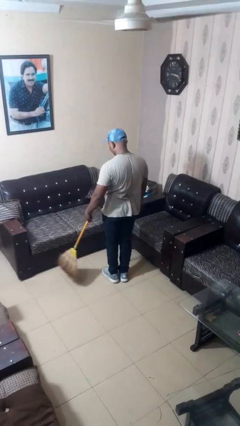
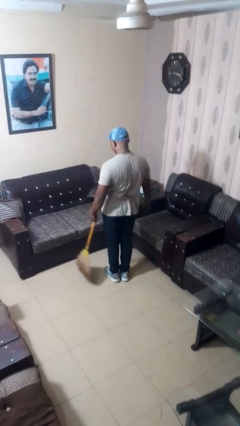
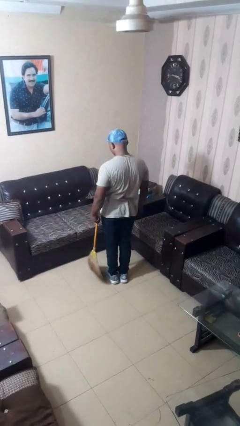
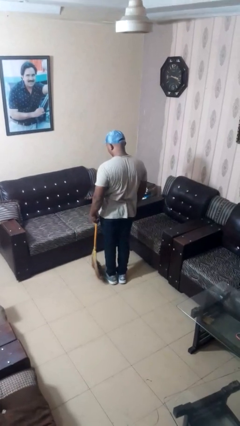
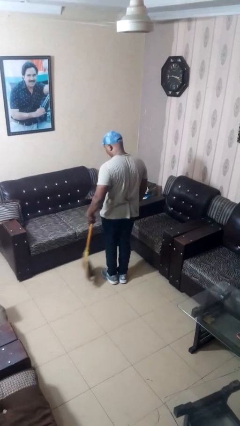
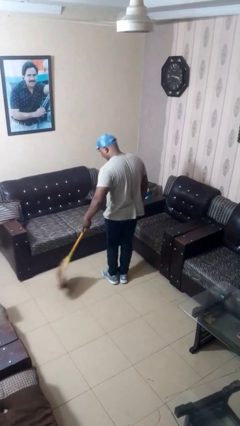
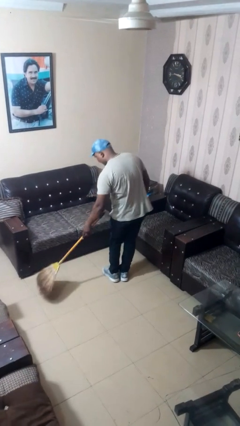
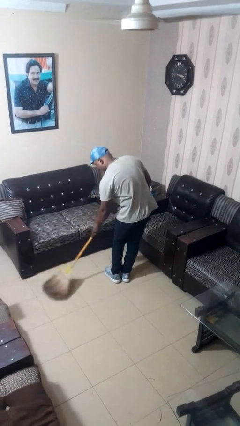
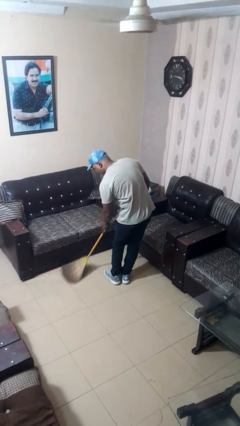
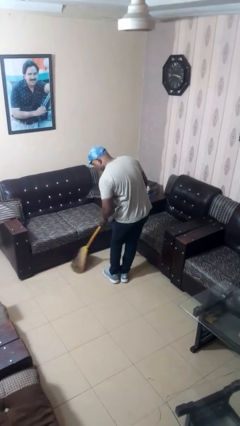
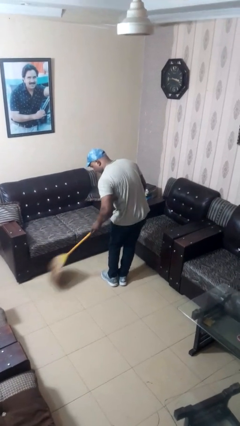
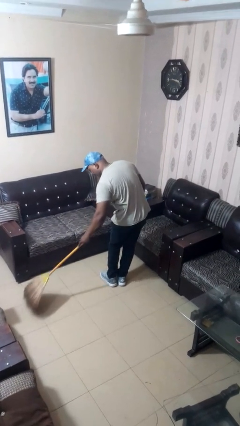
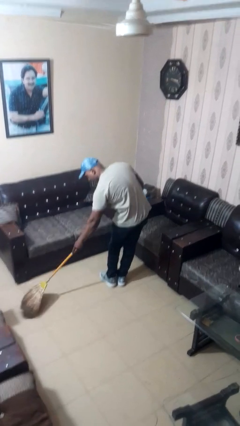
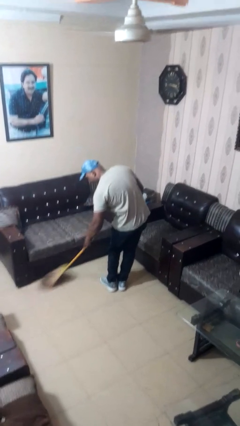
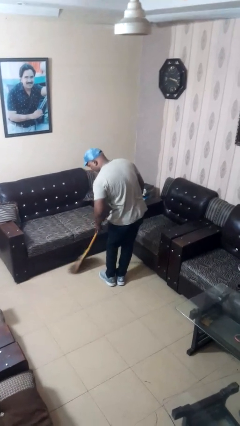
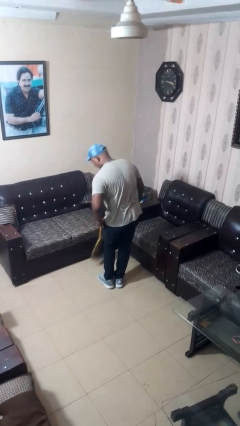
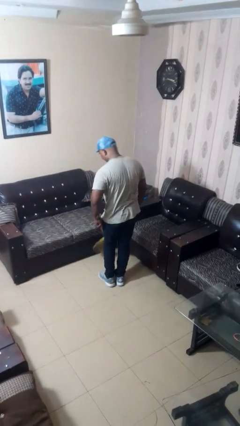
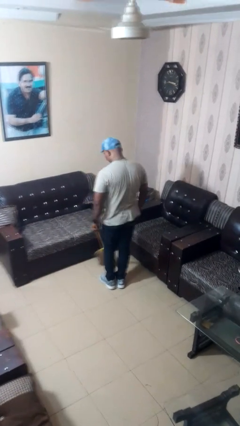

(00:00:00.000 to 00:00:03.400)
person sweeps floor

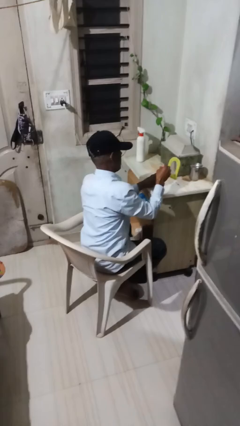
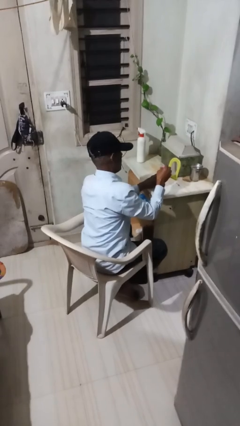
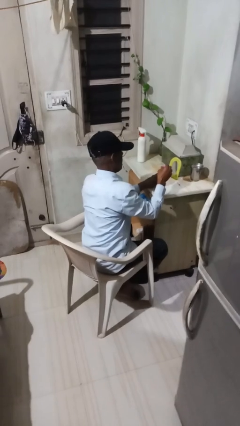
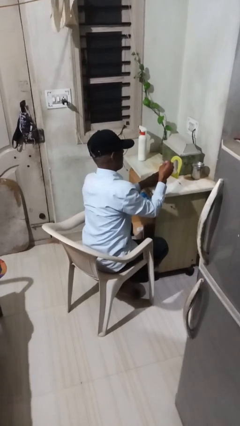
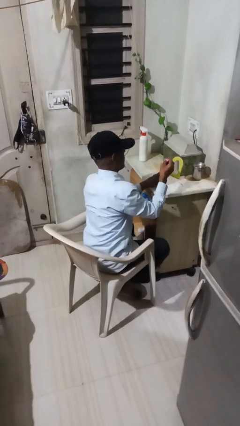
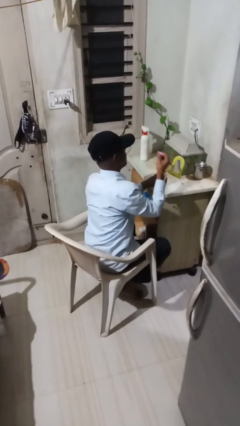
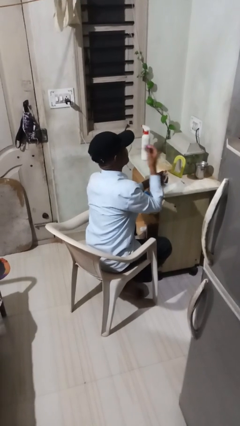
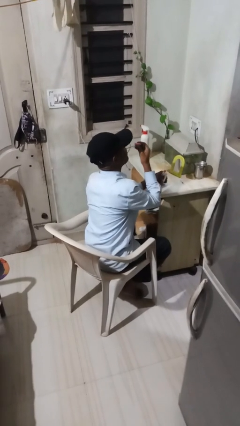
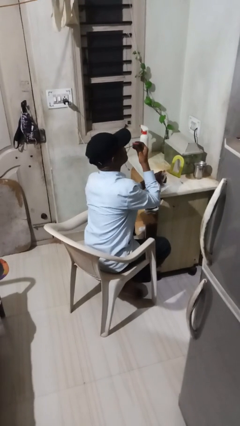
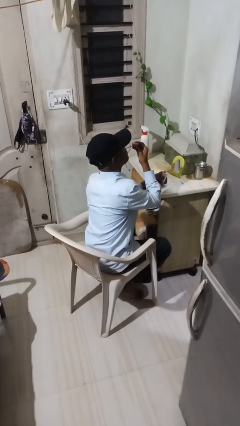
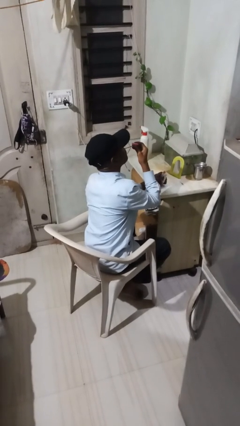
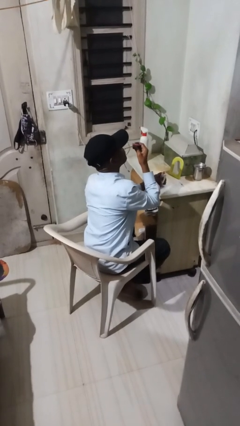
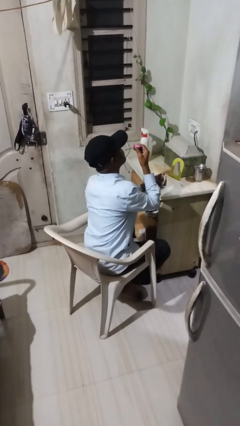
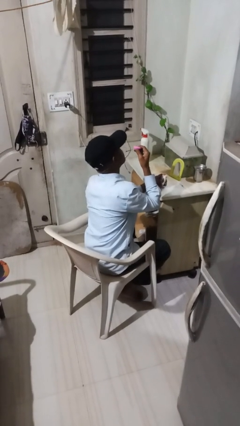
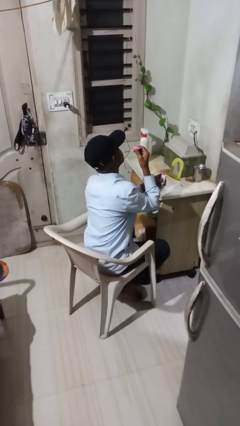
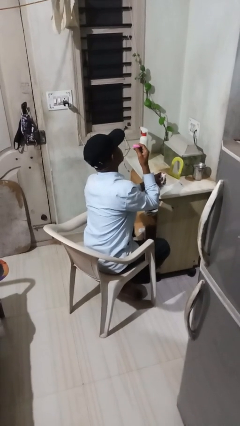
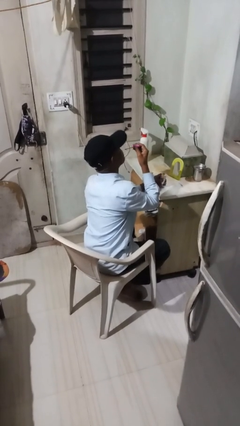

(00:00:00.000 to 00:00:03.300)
person applies lip makeup

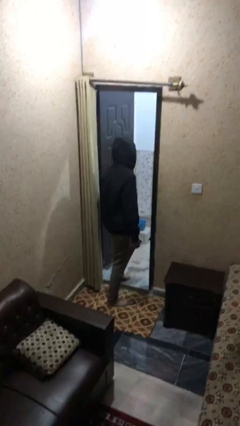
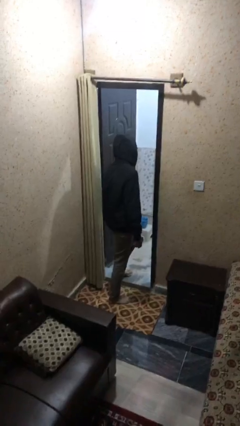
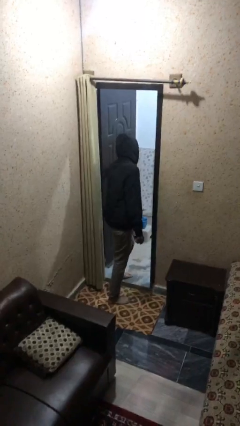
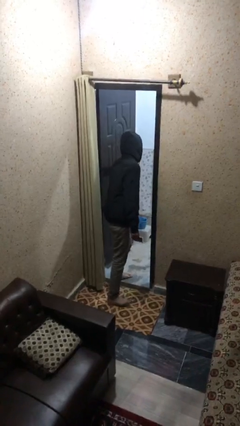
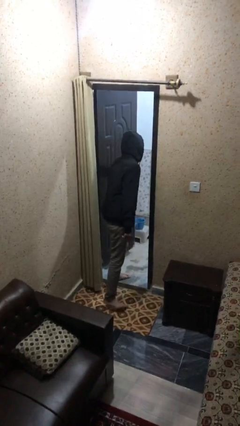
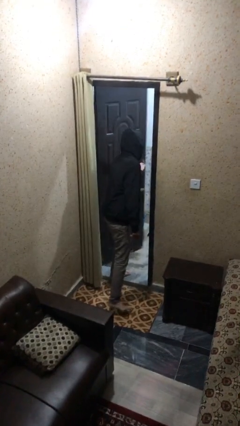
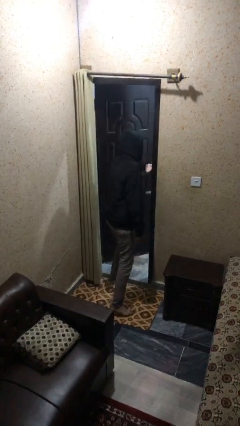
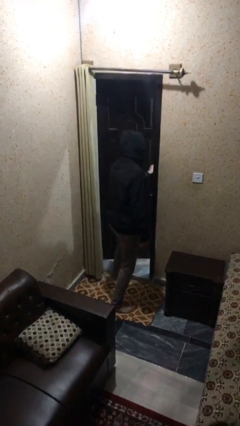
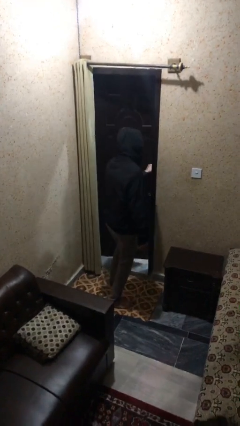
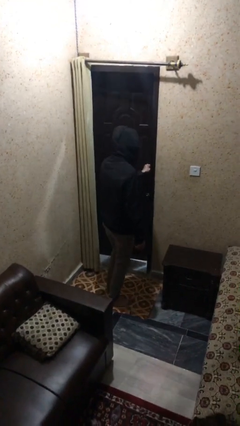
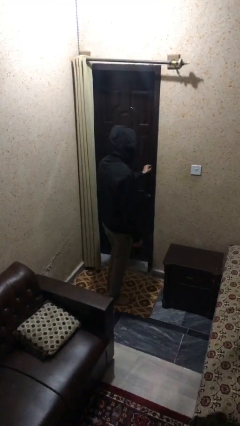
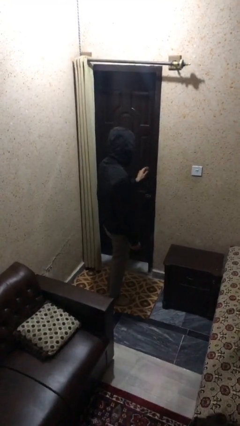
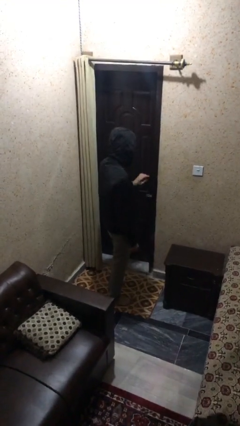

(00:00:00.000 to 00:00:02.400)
person closes facility door

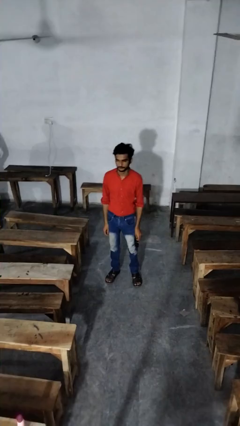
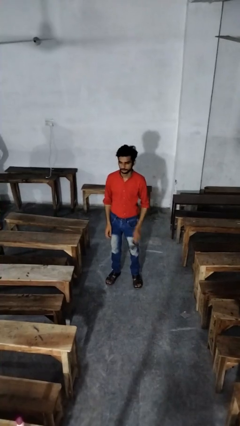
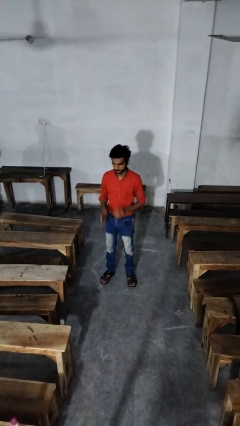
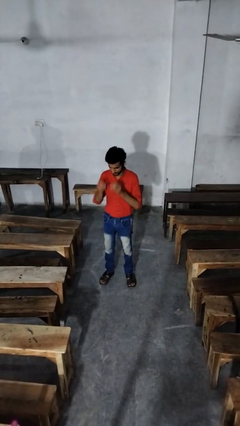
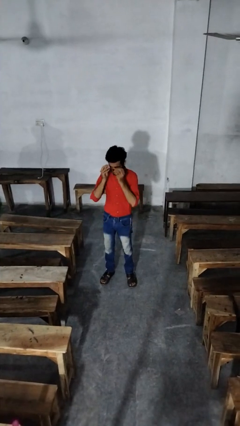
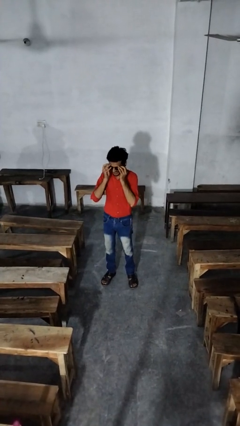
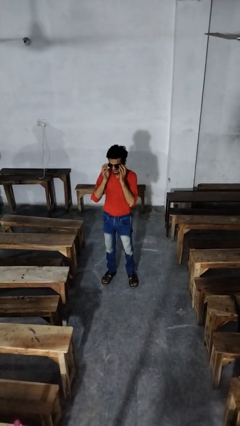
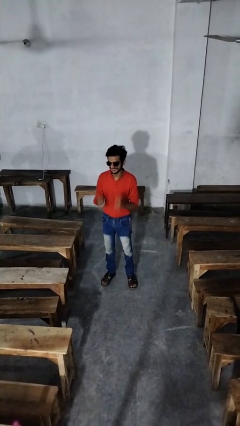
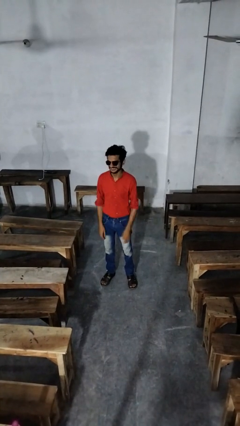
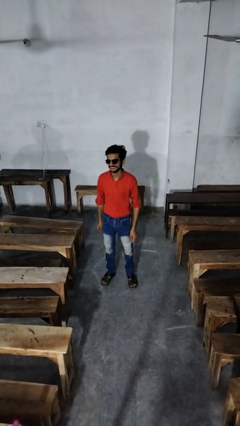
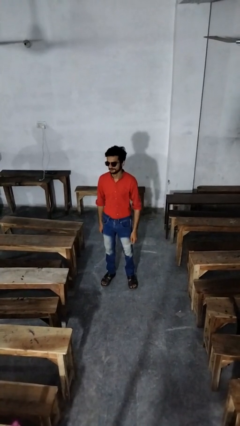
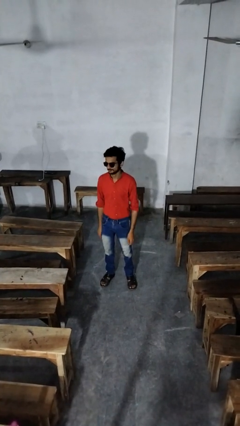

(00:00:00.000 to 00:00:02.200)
person puts on sunglasses

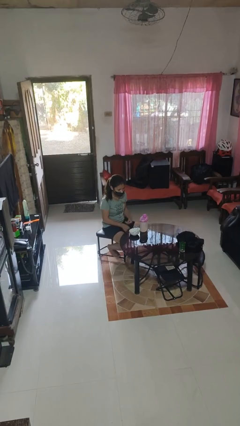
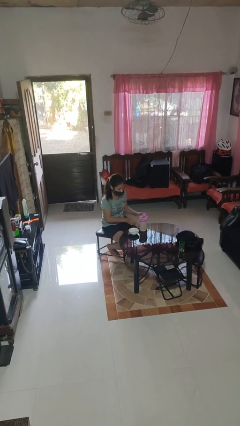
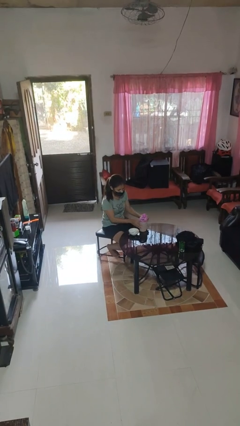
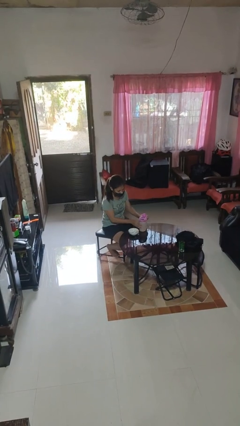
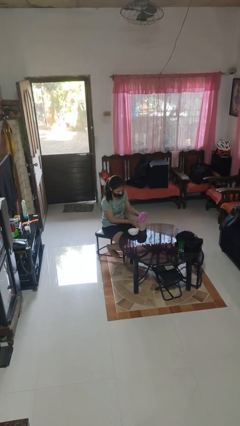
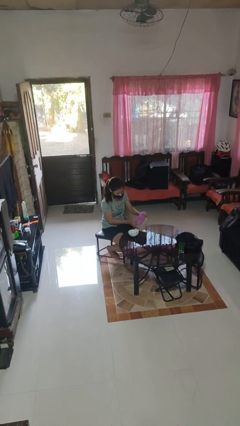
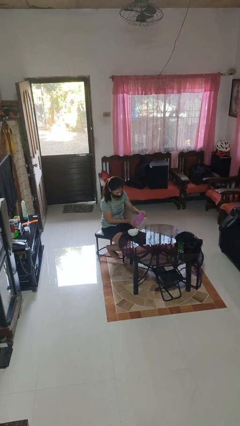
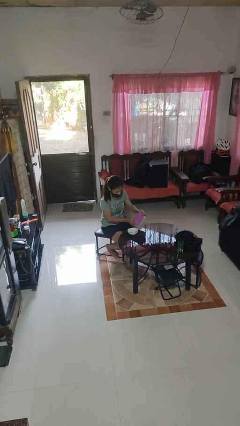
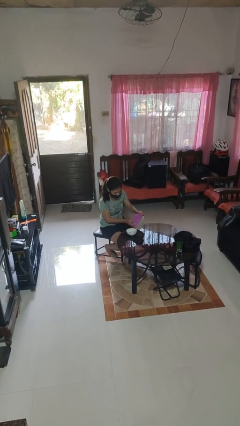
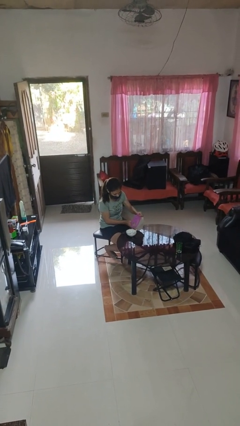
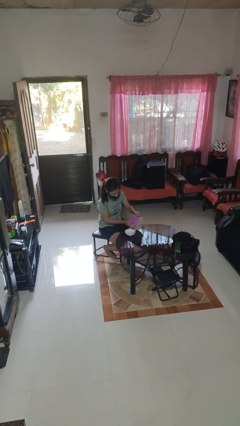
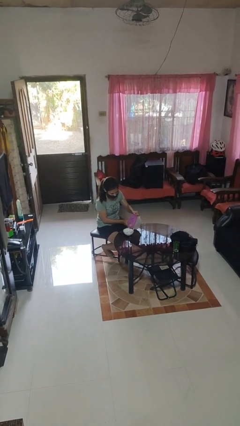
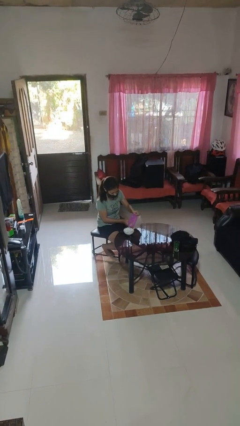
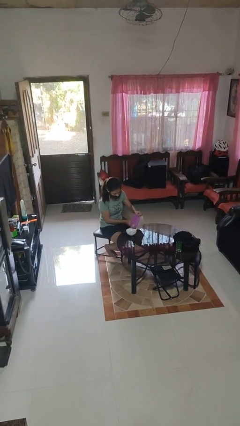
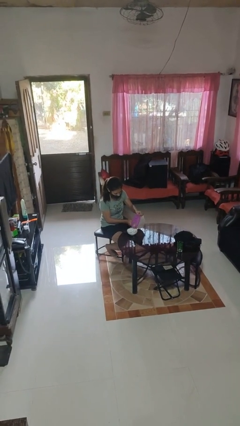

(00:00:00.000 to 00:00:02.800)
person pours into bowl

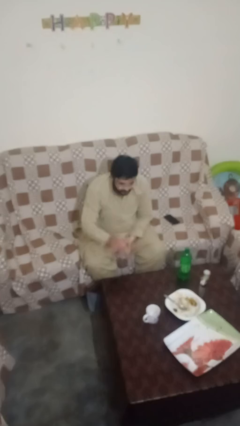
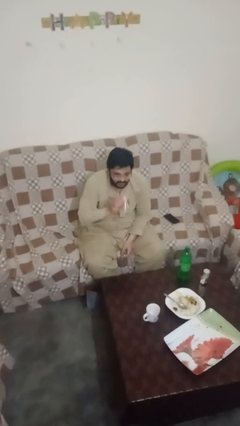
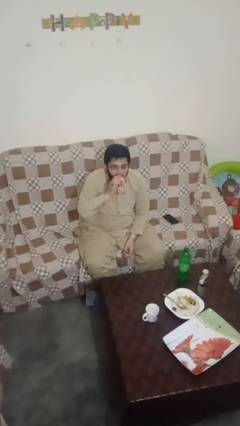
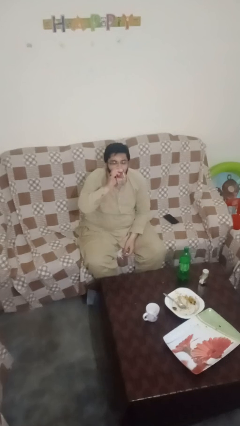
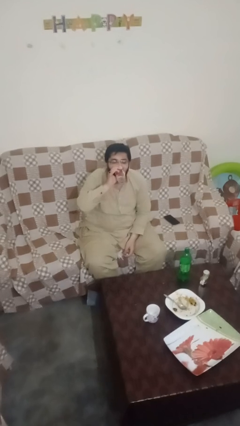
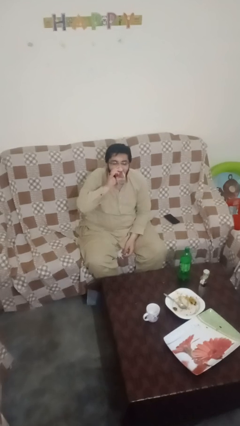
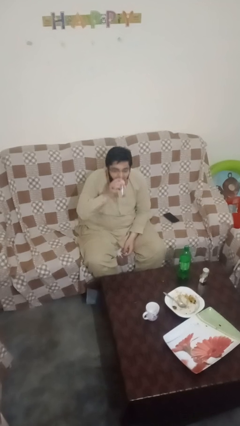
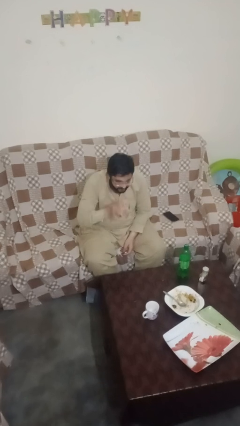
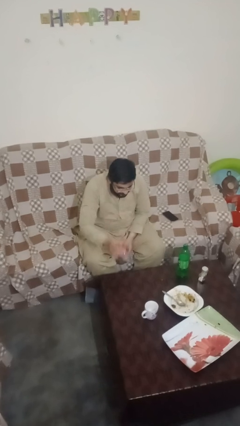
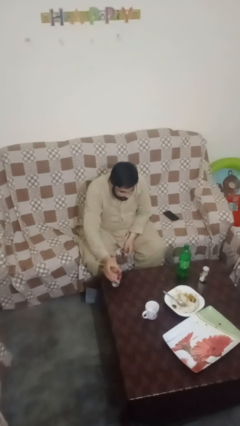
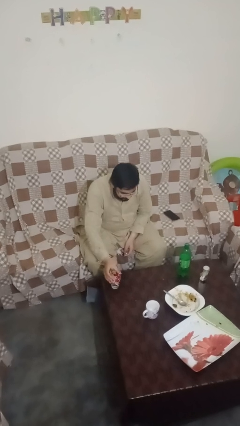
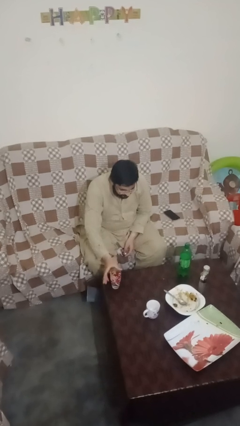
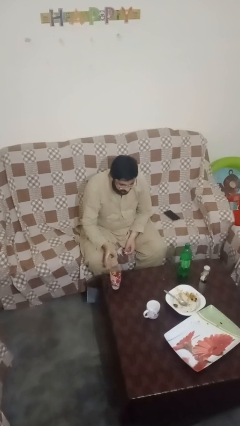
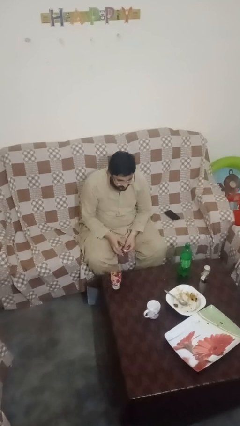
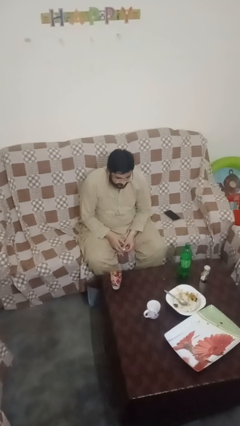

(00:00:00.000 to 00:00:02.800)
person drinks from cup
